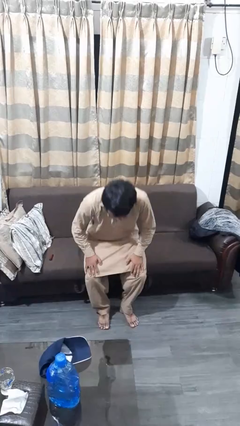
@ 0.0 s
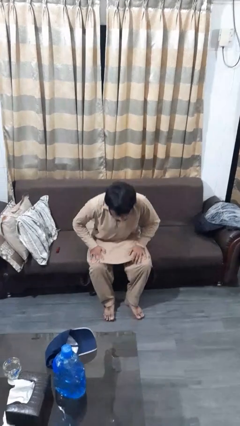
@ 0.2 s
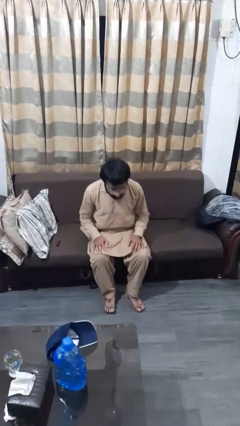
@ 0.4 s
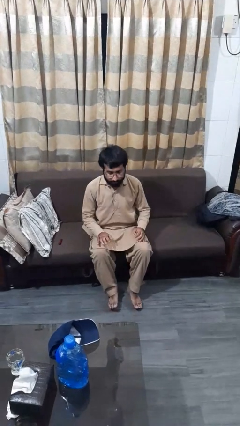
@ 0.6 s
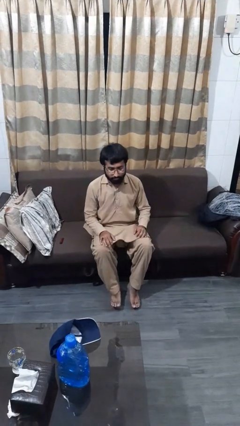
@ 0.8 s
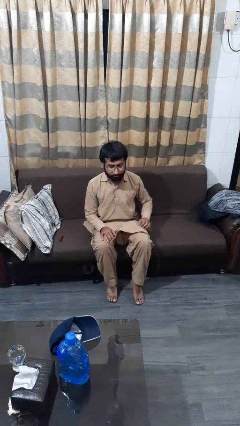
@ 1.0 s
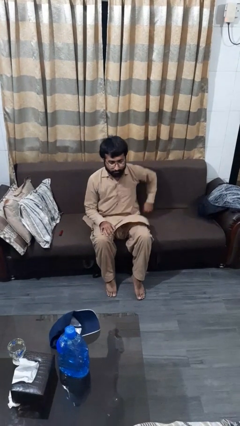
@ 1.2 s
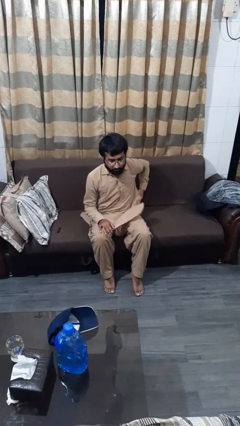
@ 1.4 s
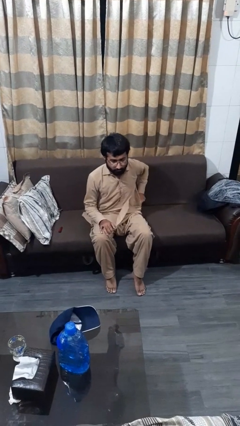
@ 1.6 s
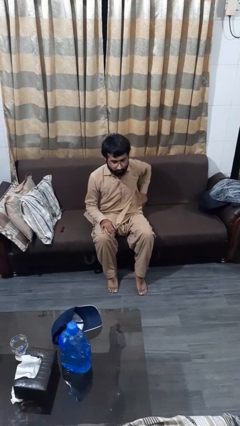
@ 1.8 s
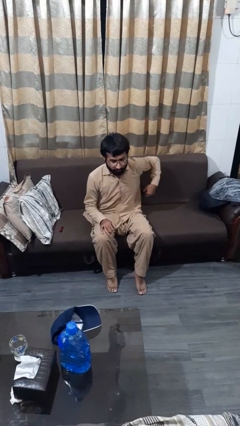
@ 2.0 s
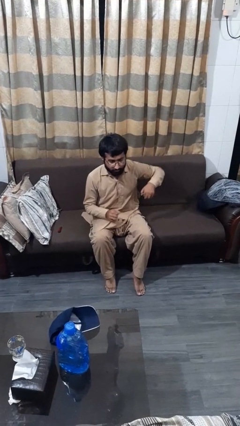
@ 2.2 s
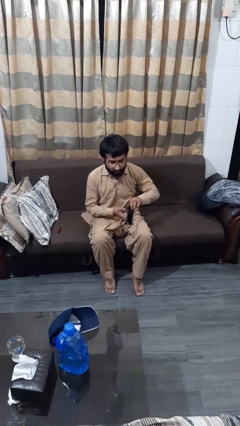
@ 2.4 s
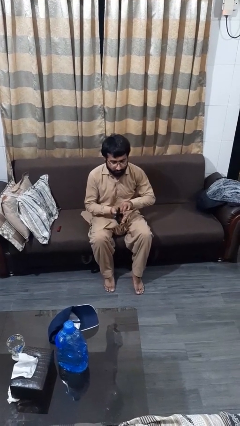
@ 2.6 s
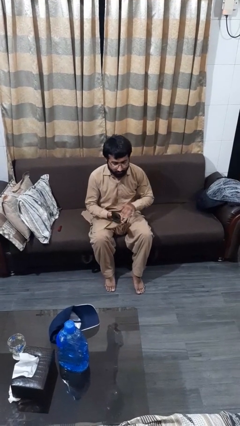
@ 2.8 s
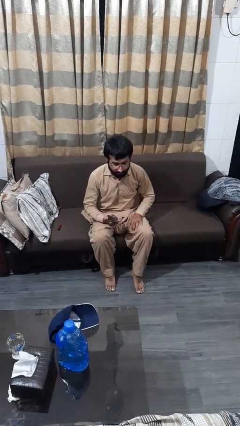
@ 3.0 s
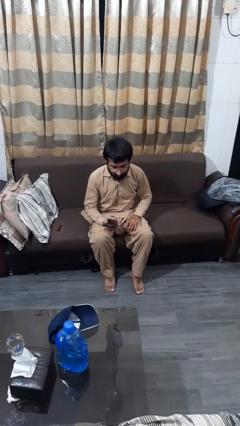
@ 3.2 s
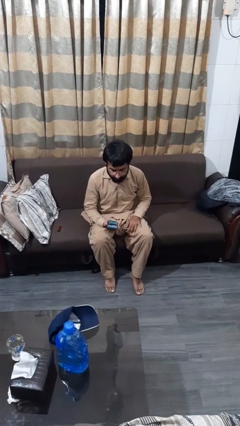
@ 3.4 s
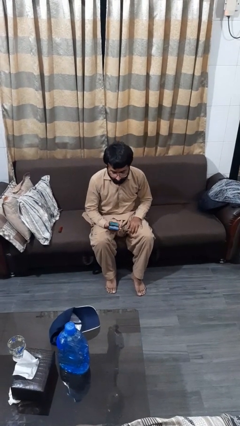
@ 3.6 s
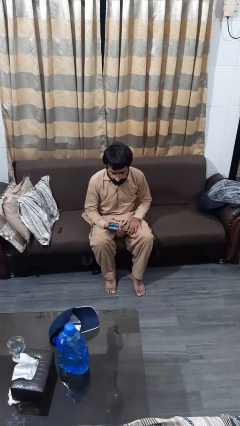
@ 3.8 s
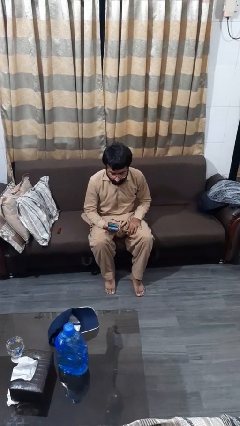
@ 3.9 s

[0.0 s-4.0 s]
person takes phone from pocket

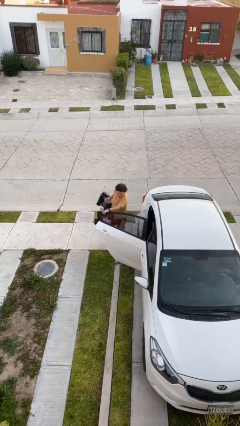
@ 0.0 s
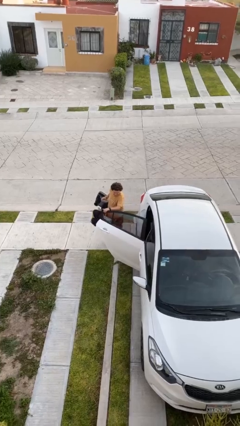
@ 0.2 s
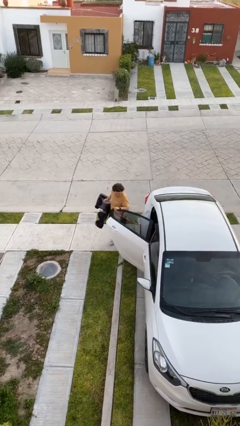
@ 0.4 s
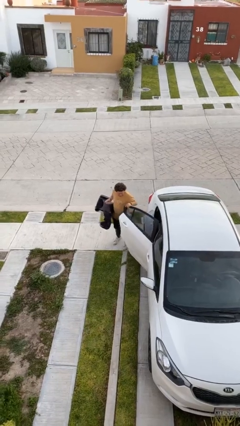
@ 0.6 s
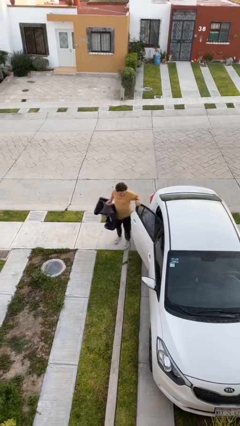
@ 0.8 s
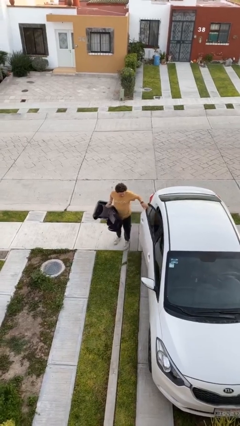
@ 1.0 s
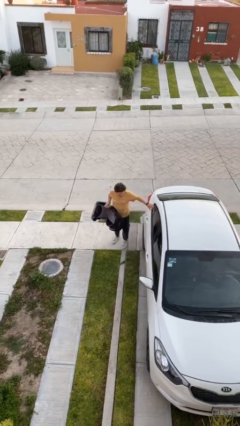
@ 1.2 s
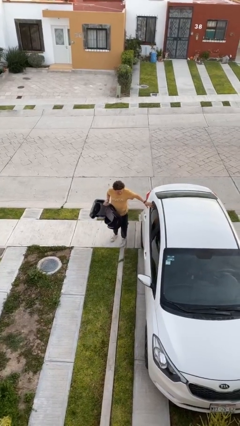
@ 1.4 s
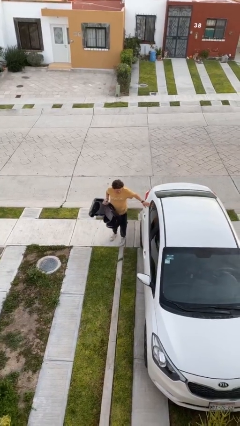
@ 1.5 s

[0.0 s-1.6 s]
person closes car door

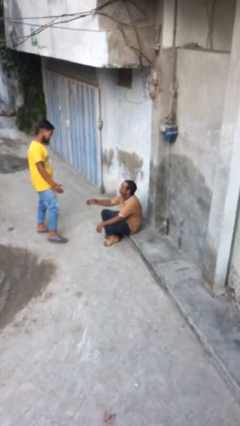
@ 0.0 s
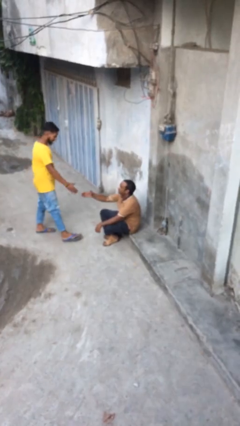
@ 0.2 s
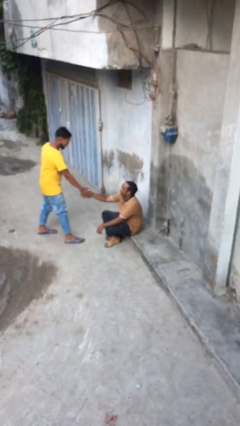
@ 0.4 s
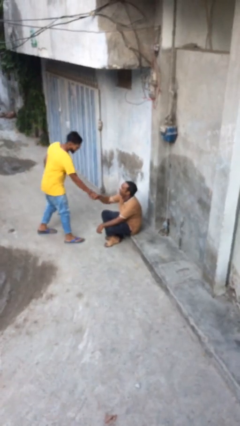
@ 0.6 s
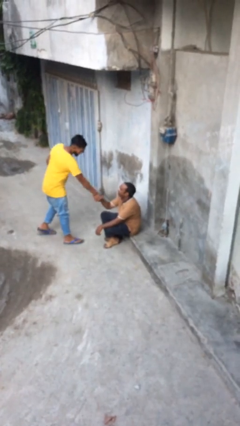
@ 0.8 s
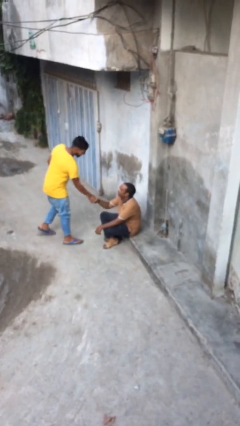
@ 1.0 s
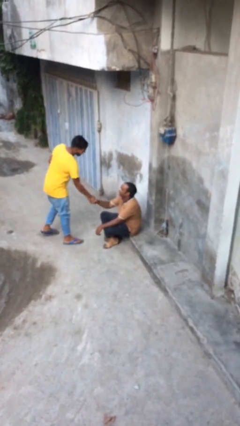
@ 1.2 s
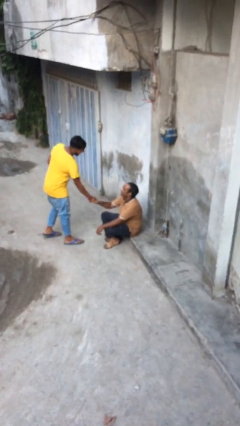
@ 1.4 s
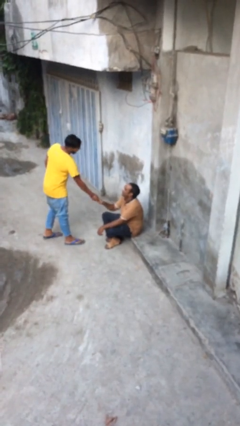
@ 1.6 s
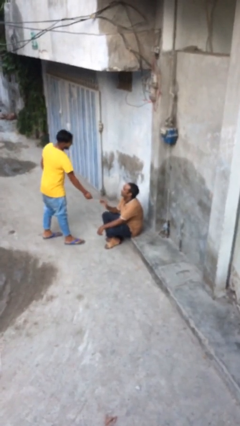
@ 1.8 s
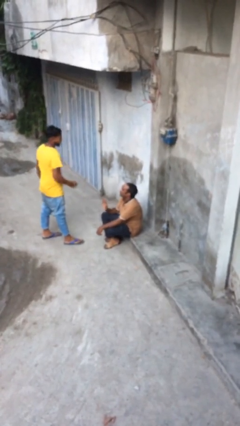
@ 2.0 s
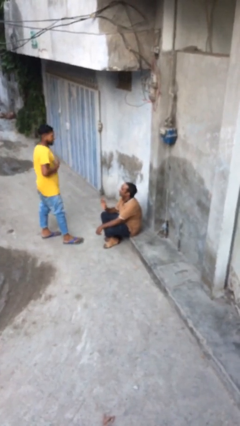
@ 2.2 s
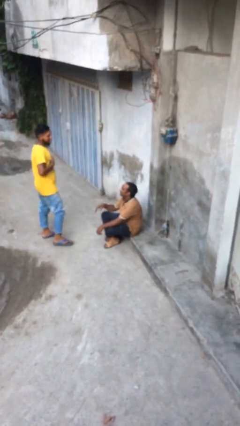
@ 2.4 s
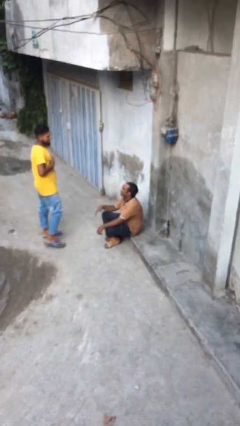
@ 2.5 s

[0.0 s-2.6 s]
person shakes hand

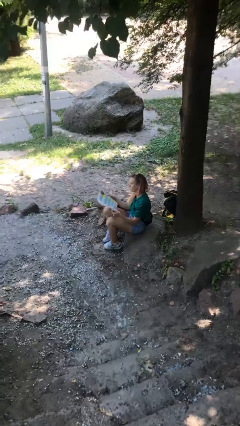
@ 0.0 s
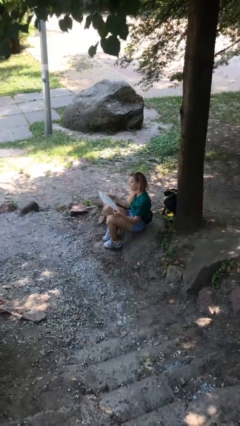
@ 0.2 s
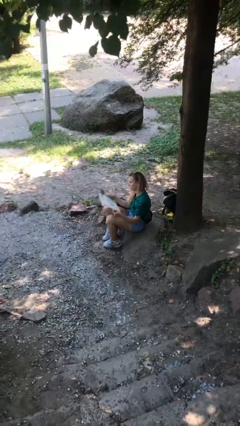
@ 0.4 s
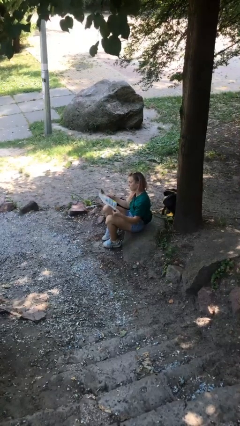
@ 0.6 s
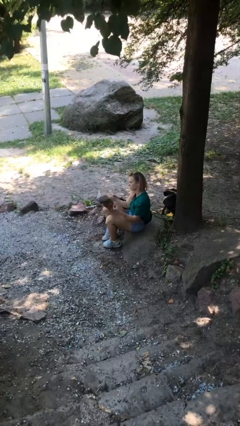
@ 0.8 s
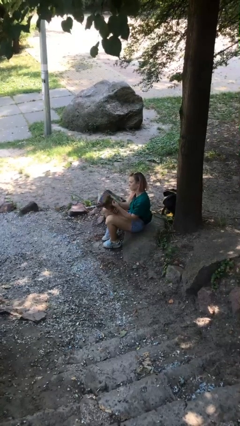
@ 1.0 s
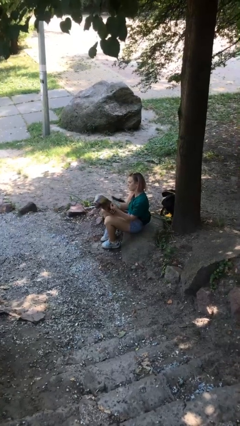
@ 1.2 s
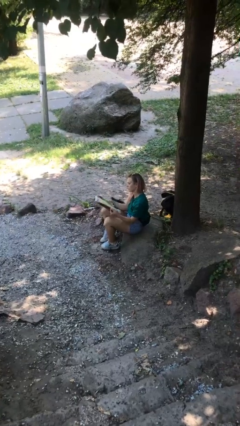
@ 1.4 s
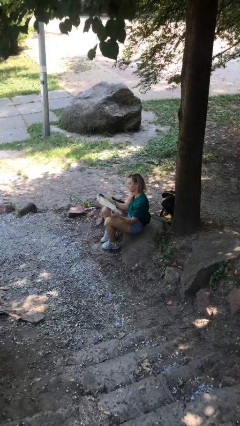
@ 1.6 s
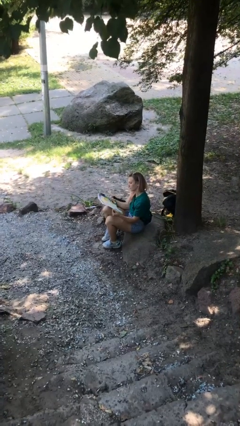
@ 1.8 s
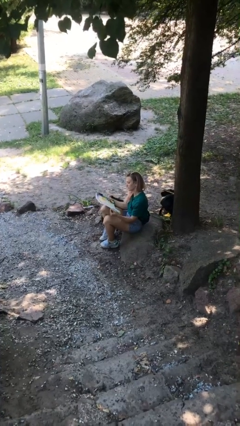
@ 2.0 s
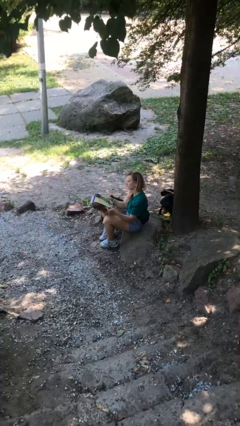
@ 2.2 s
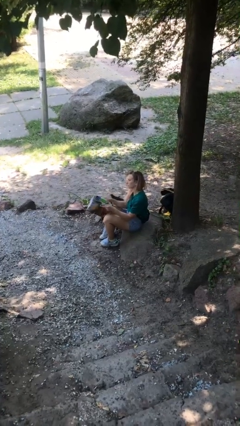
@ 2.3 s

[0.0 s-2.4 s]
person reads magazine

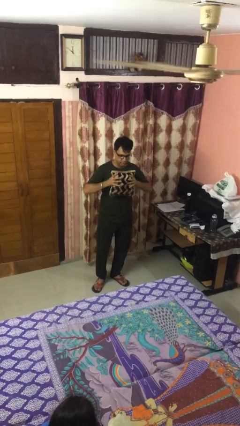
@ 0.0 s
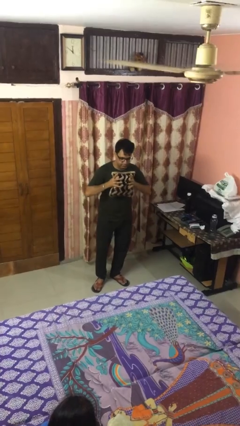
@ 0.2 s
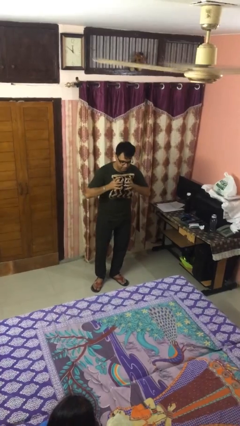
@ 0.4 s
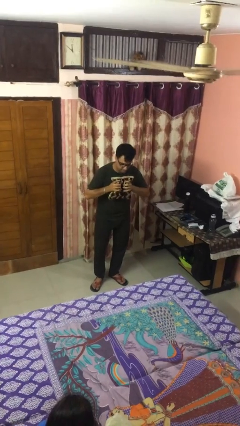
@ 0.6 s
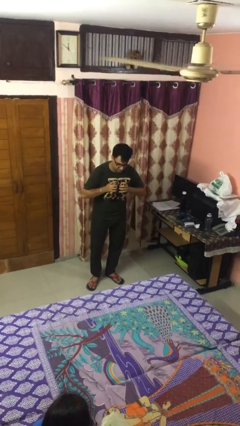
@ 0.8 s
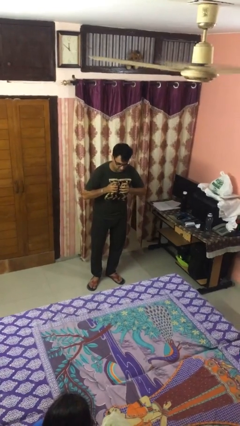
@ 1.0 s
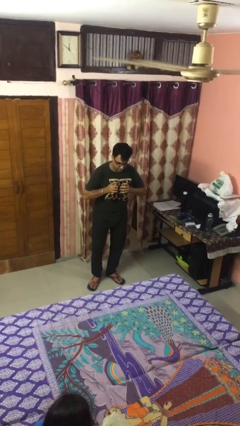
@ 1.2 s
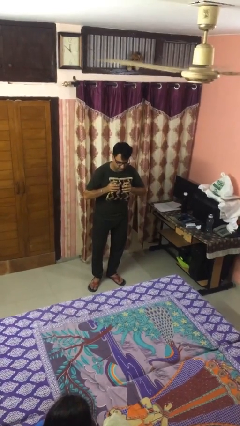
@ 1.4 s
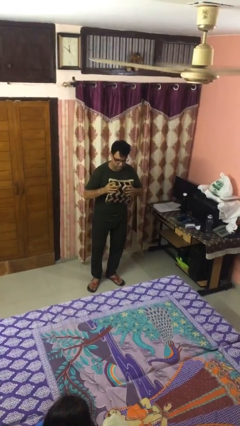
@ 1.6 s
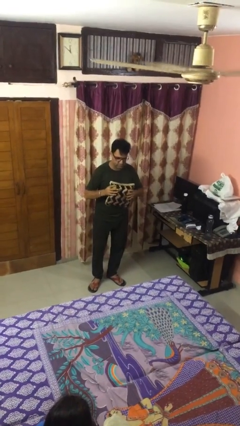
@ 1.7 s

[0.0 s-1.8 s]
person squeezes object

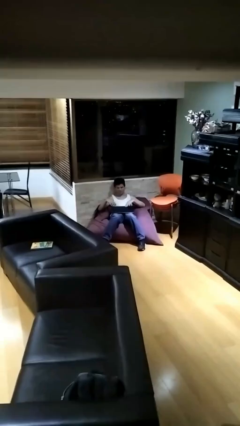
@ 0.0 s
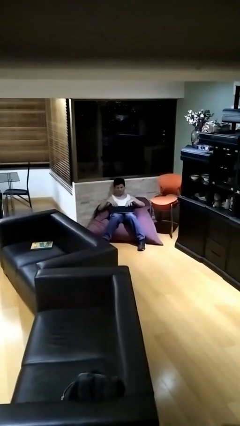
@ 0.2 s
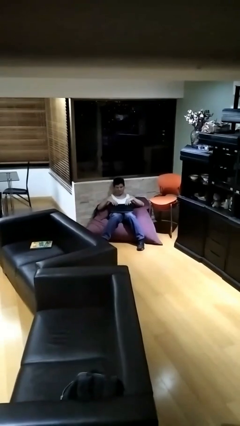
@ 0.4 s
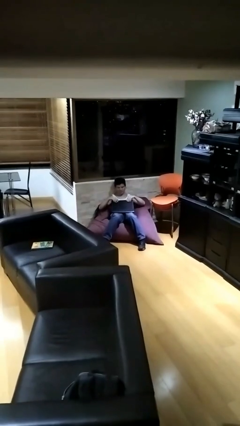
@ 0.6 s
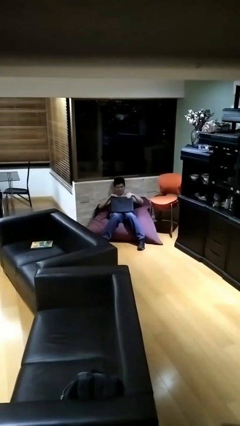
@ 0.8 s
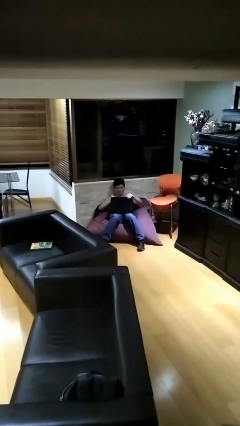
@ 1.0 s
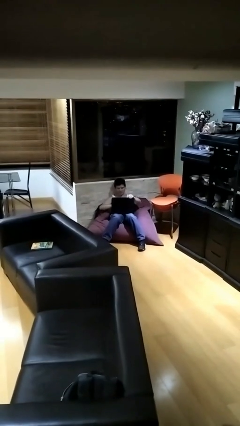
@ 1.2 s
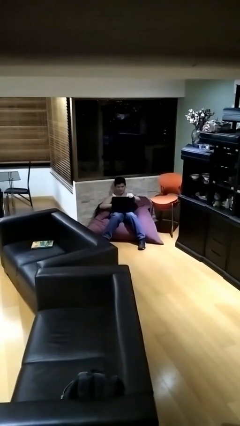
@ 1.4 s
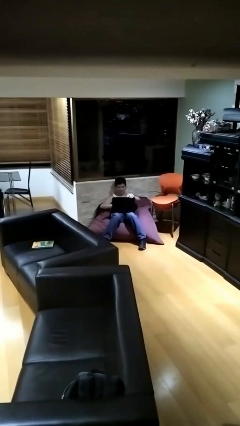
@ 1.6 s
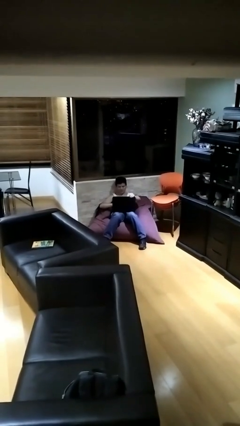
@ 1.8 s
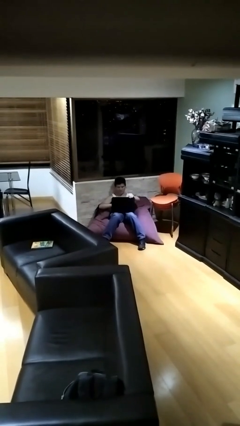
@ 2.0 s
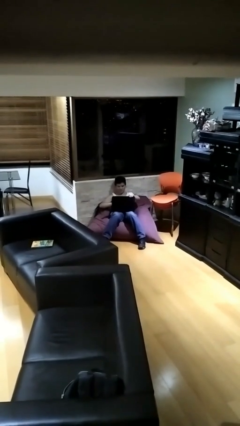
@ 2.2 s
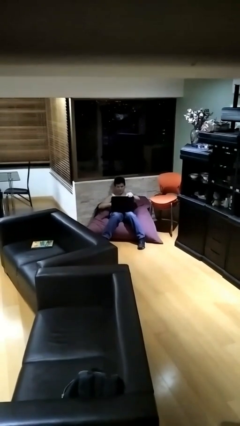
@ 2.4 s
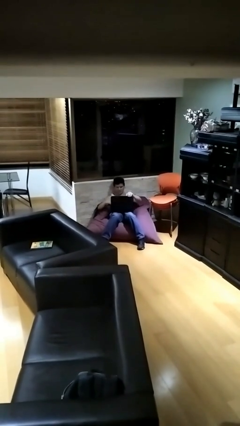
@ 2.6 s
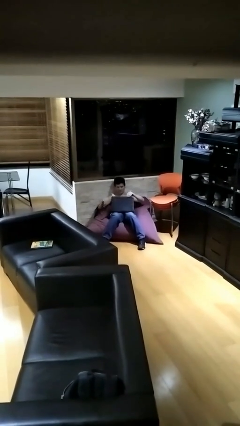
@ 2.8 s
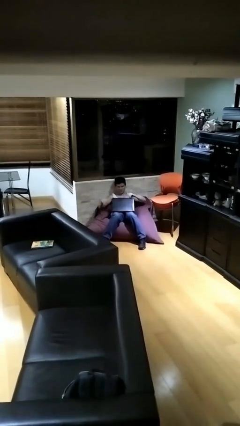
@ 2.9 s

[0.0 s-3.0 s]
person interacts with laptop

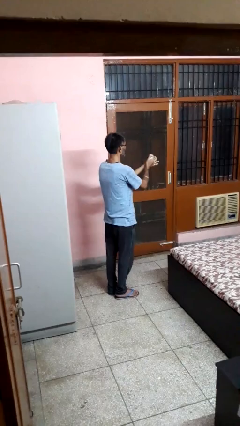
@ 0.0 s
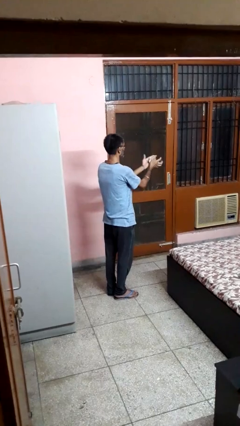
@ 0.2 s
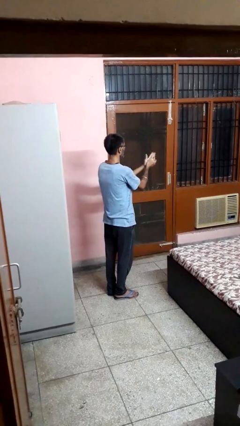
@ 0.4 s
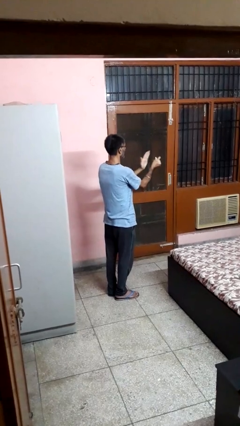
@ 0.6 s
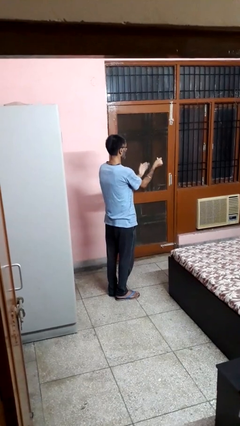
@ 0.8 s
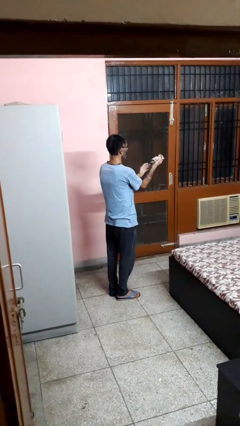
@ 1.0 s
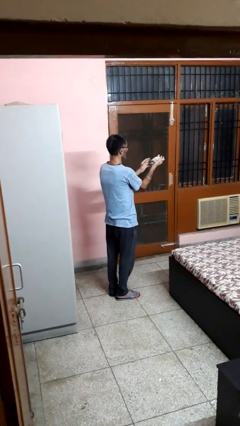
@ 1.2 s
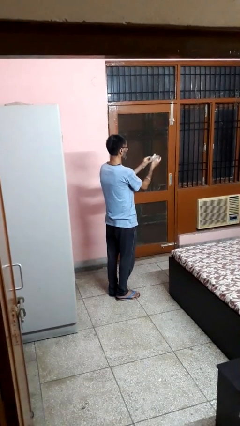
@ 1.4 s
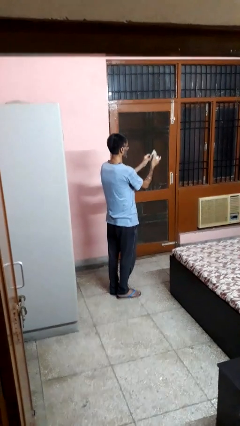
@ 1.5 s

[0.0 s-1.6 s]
person crumples paper
